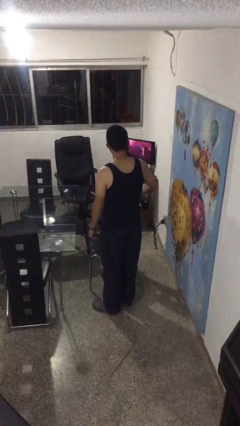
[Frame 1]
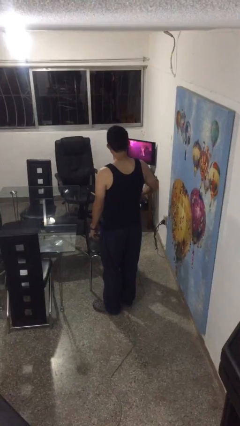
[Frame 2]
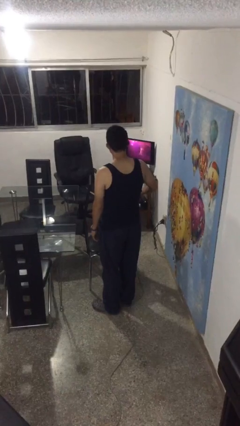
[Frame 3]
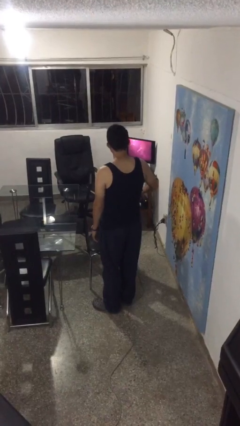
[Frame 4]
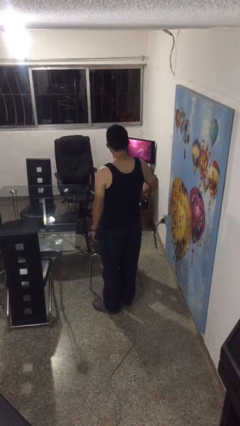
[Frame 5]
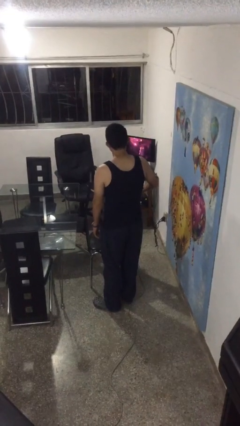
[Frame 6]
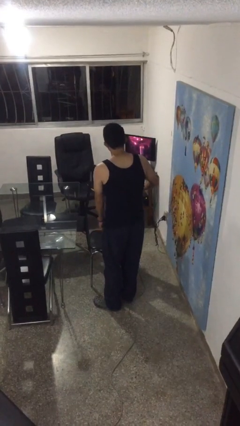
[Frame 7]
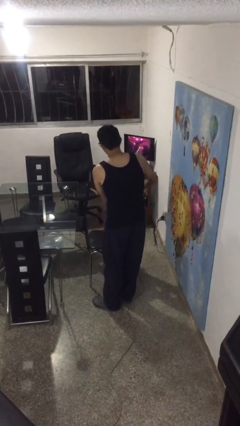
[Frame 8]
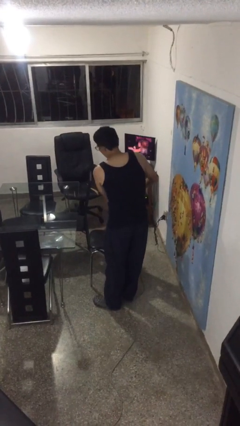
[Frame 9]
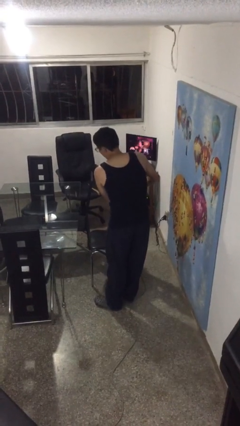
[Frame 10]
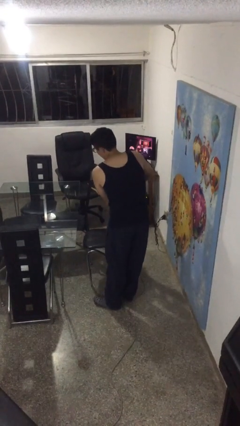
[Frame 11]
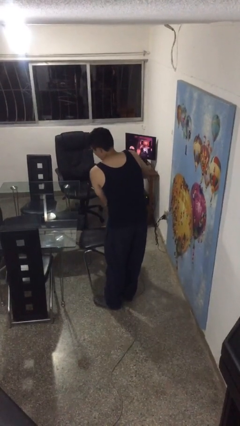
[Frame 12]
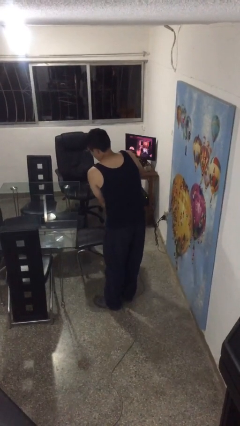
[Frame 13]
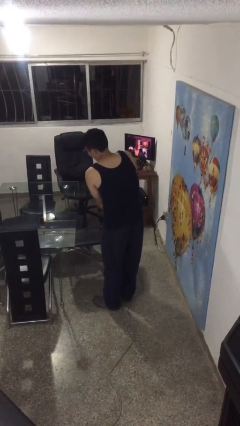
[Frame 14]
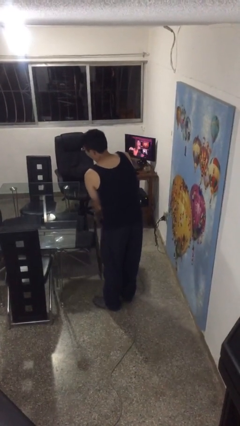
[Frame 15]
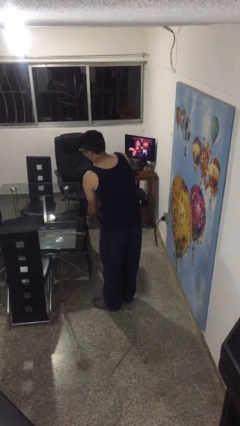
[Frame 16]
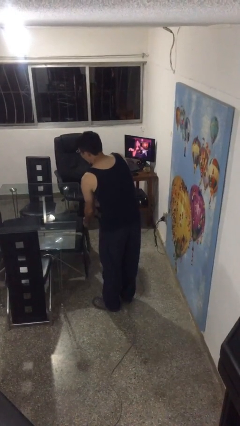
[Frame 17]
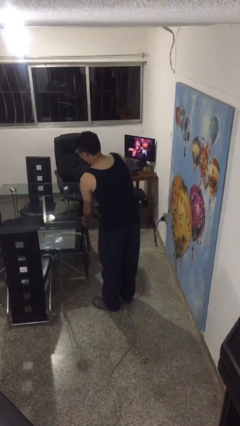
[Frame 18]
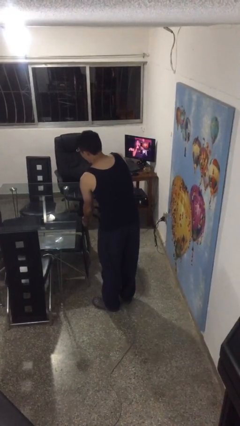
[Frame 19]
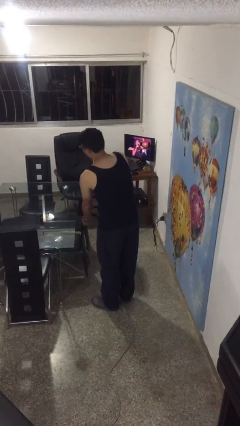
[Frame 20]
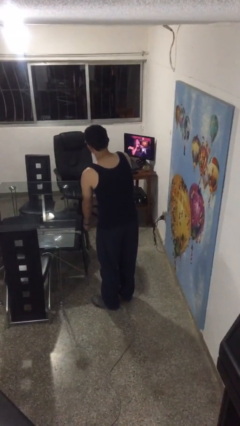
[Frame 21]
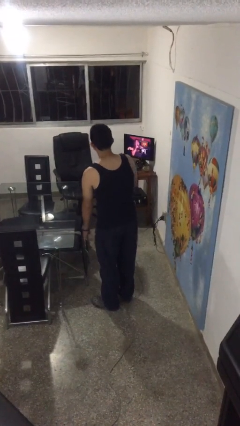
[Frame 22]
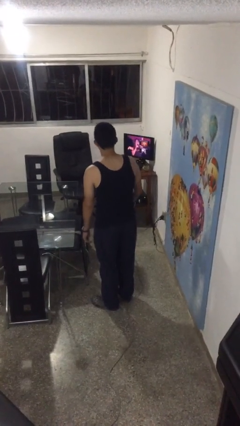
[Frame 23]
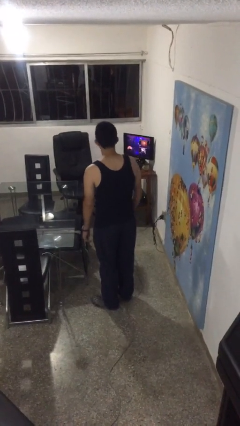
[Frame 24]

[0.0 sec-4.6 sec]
person pushes in chair

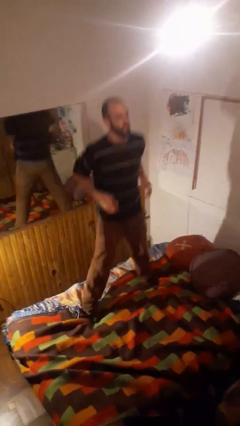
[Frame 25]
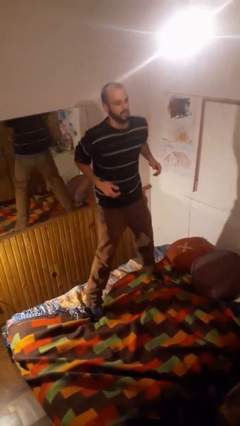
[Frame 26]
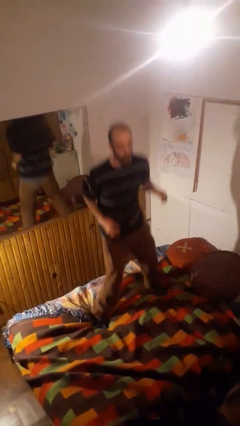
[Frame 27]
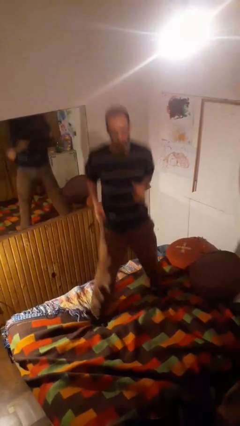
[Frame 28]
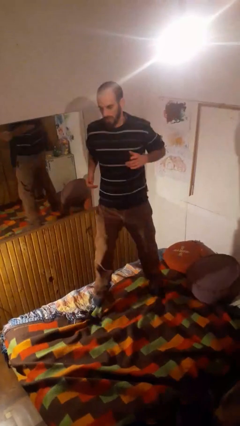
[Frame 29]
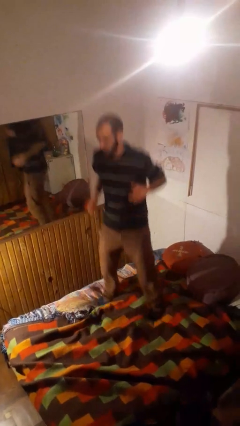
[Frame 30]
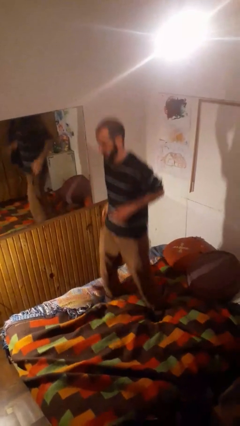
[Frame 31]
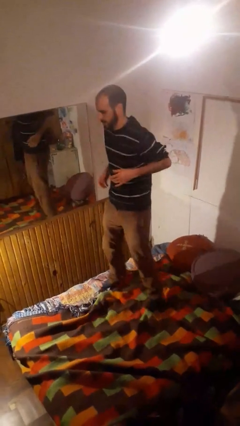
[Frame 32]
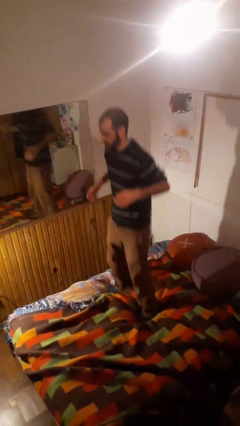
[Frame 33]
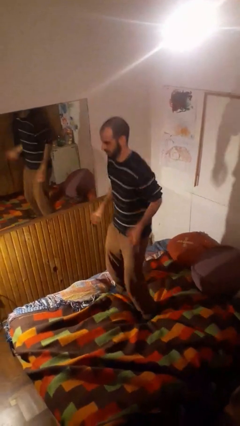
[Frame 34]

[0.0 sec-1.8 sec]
person jumps on bed

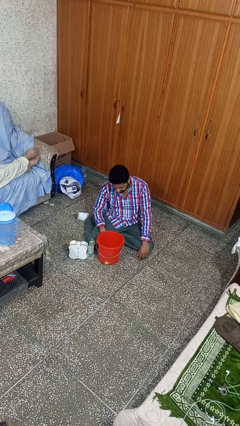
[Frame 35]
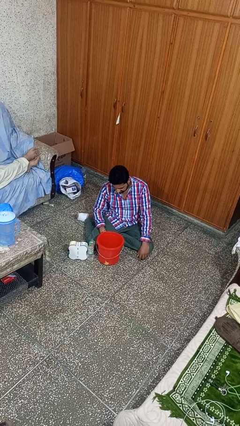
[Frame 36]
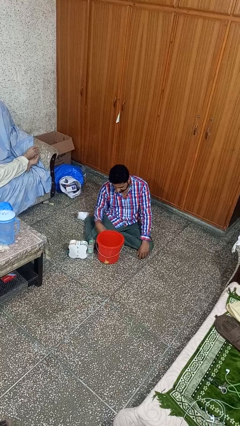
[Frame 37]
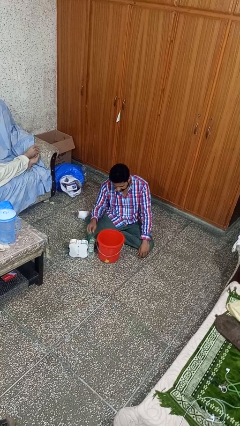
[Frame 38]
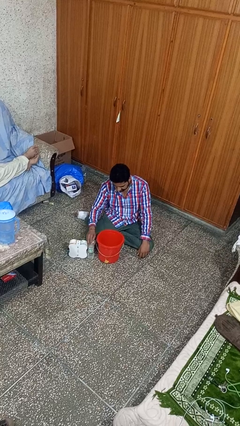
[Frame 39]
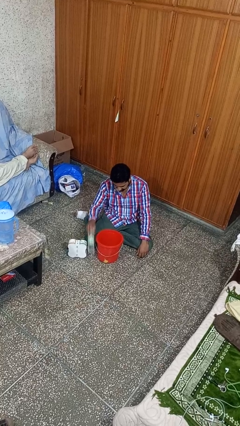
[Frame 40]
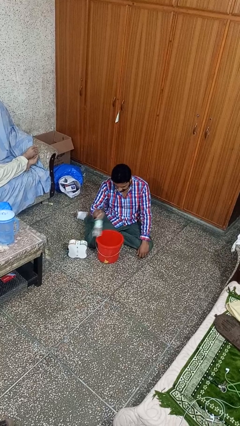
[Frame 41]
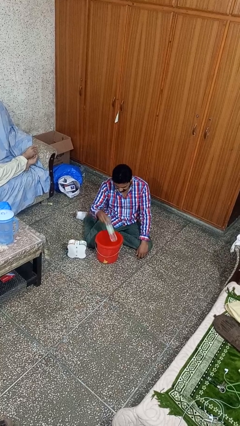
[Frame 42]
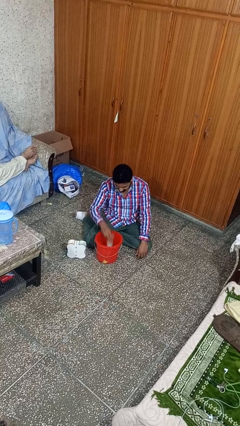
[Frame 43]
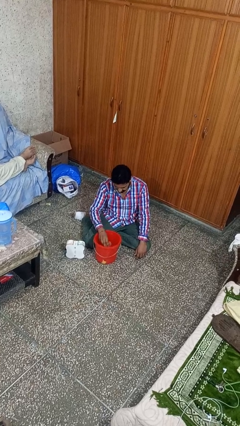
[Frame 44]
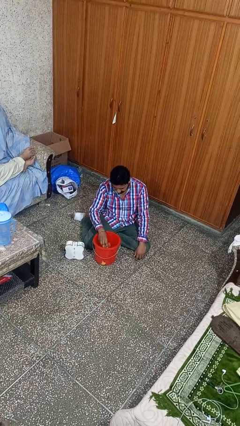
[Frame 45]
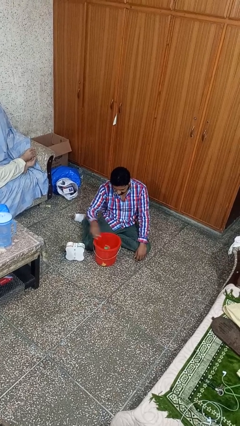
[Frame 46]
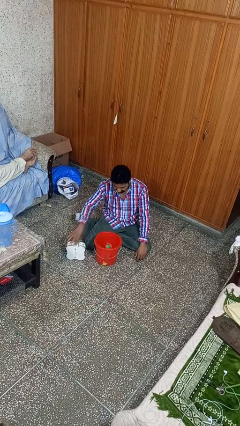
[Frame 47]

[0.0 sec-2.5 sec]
person puts object into basket

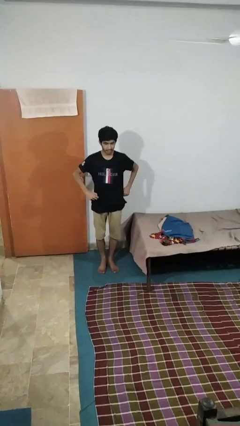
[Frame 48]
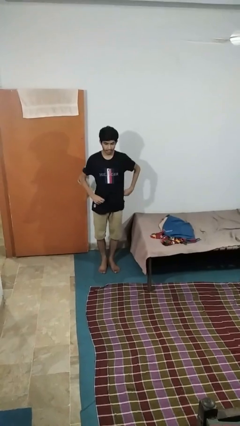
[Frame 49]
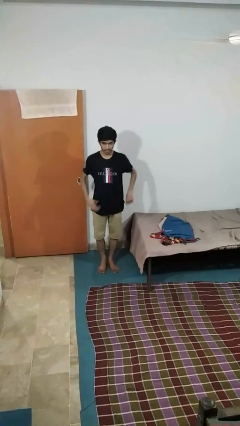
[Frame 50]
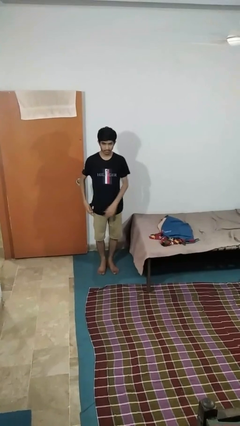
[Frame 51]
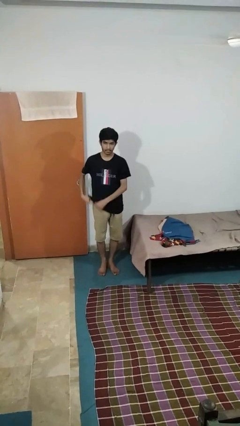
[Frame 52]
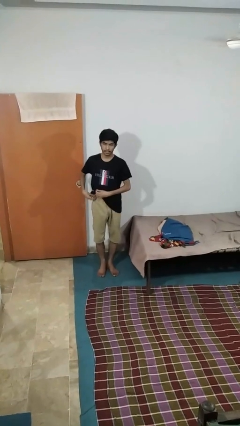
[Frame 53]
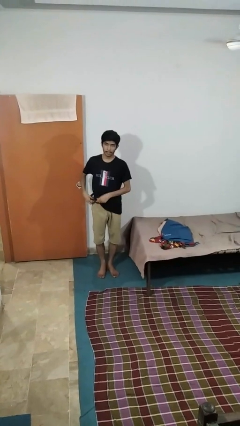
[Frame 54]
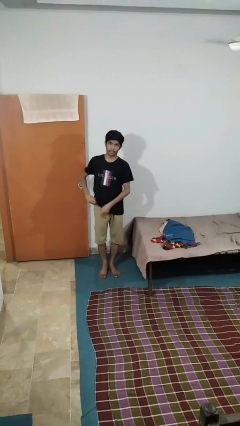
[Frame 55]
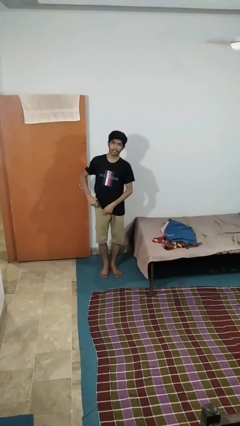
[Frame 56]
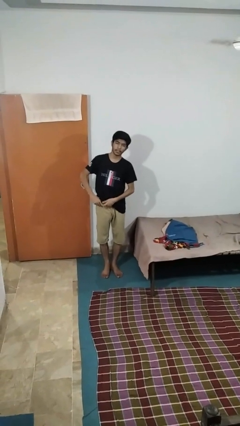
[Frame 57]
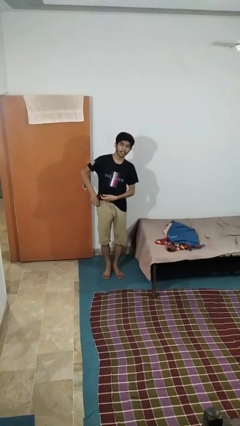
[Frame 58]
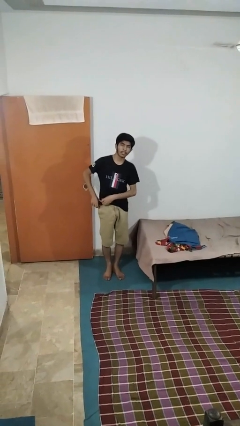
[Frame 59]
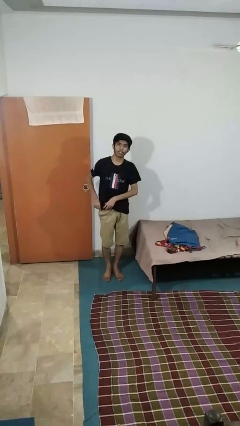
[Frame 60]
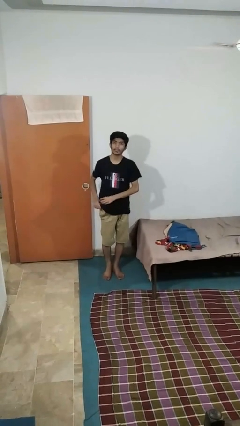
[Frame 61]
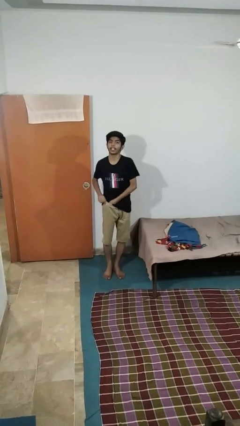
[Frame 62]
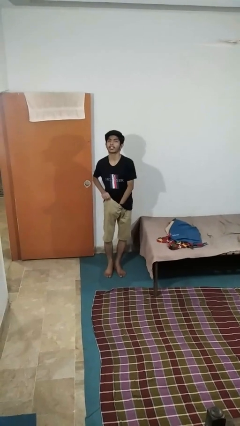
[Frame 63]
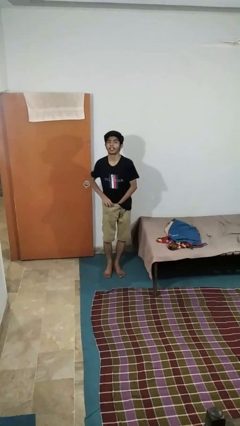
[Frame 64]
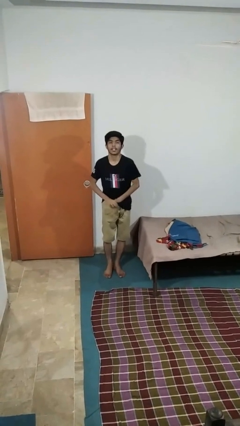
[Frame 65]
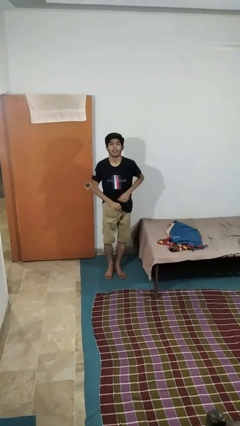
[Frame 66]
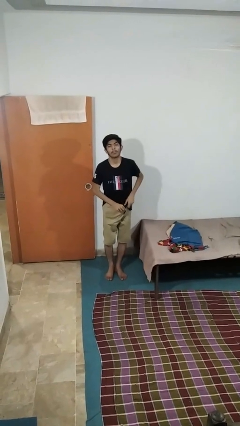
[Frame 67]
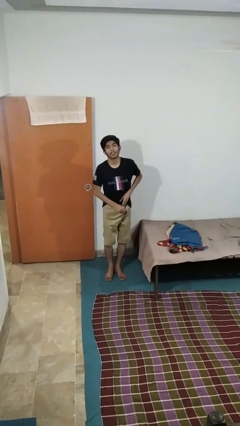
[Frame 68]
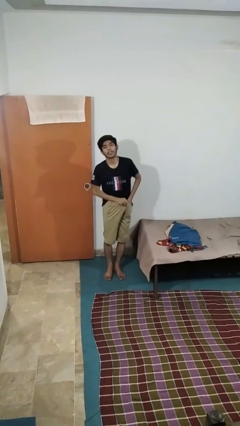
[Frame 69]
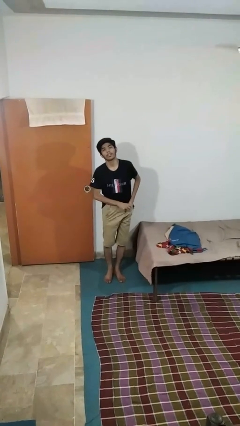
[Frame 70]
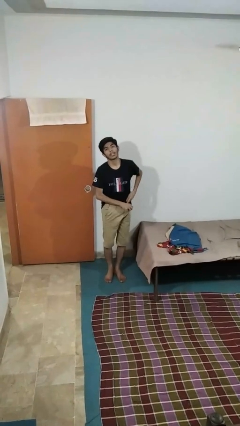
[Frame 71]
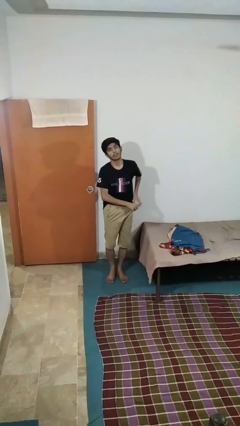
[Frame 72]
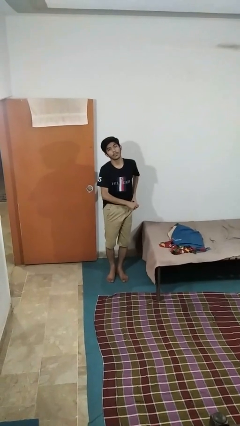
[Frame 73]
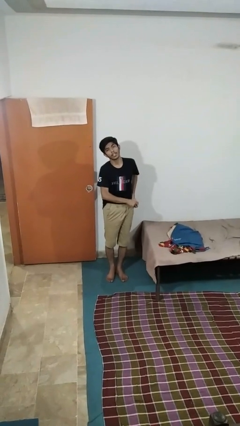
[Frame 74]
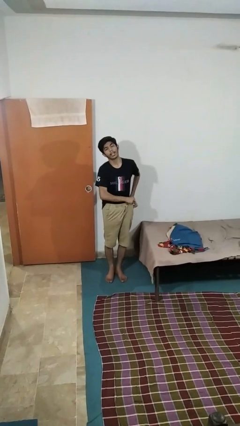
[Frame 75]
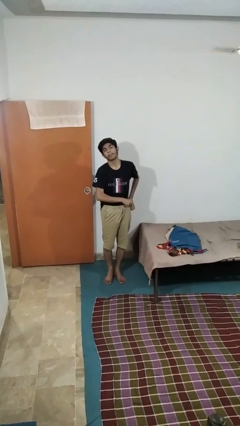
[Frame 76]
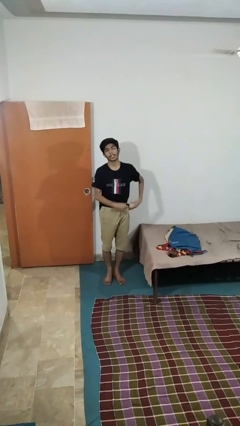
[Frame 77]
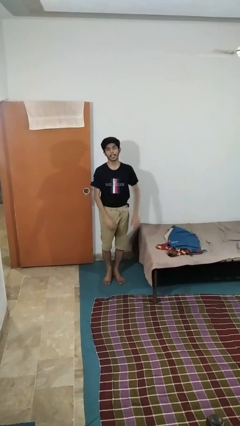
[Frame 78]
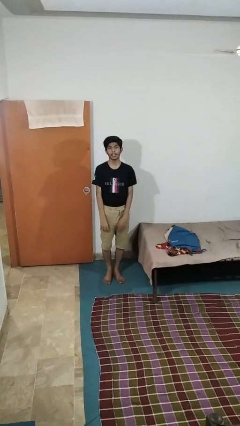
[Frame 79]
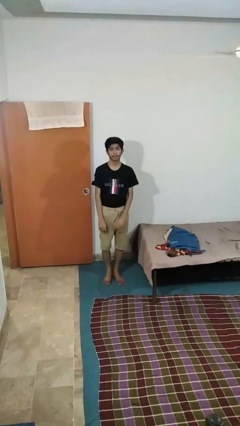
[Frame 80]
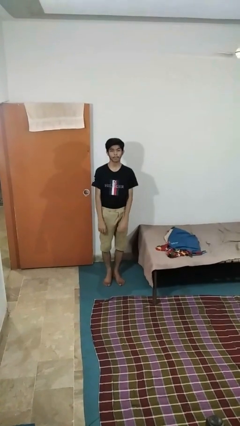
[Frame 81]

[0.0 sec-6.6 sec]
person tucks in shirt

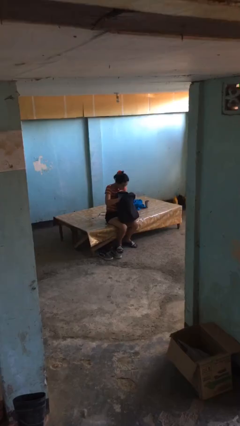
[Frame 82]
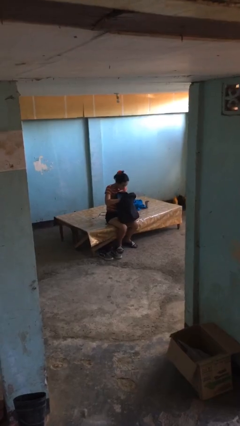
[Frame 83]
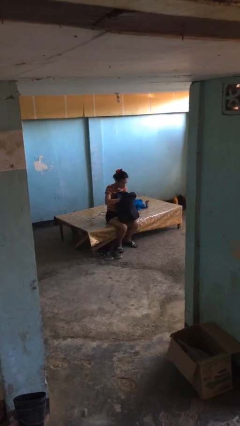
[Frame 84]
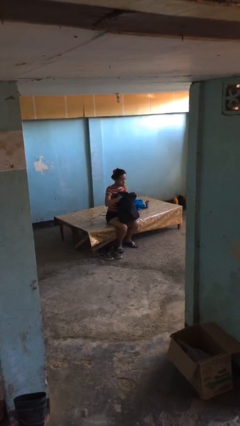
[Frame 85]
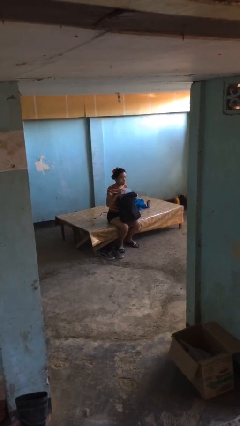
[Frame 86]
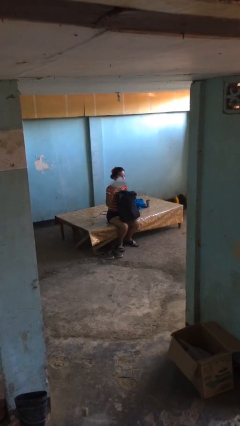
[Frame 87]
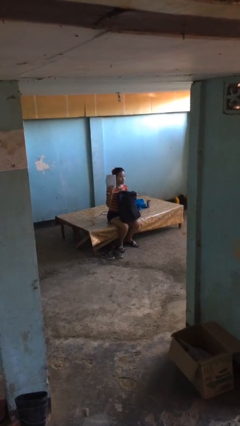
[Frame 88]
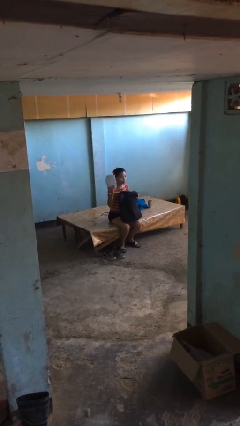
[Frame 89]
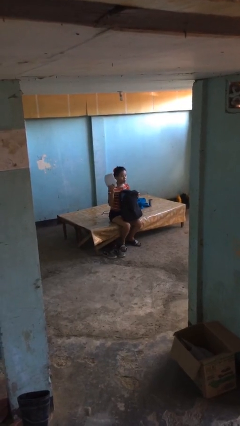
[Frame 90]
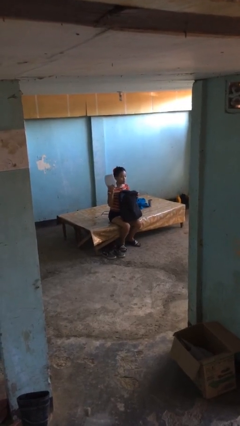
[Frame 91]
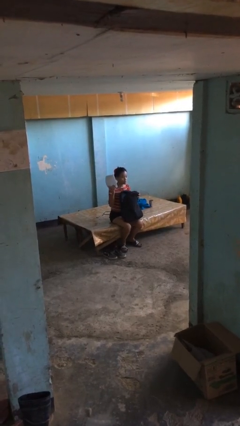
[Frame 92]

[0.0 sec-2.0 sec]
person takes object from backpack

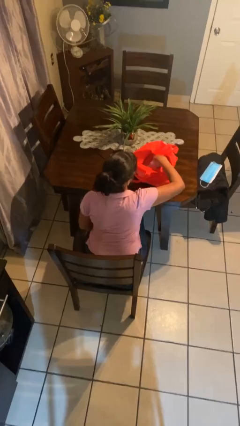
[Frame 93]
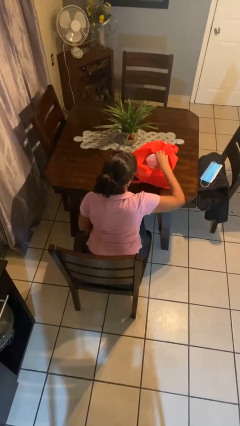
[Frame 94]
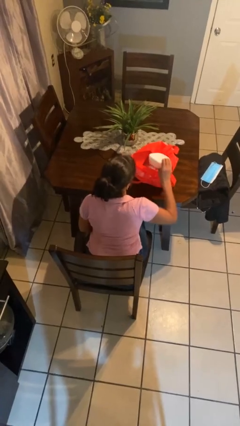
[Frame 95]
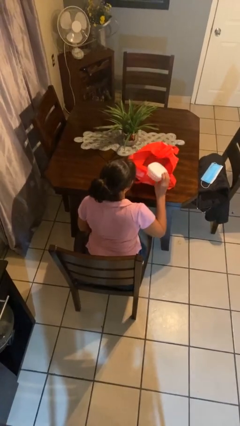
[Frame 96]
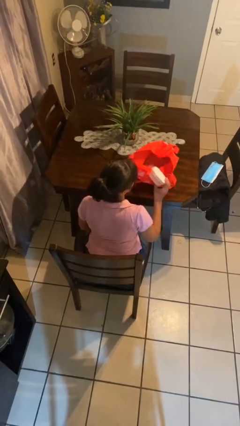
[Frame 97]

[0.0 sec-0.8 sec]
person takes object from bag
